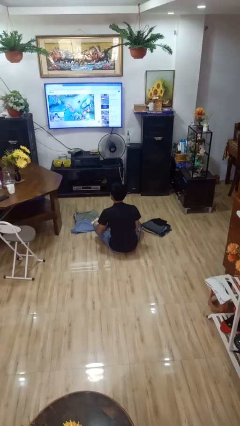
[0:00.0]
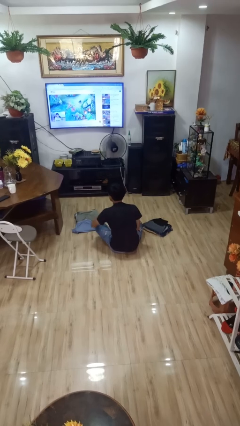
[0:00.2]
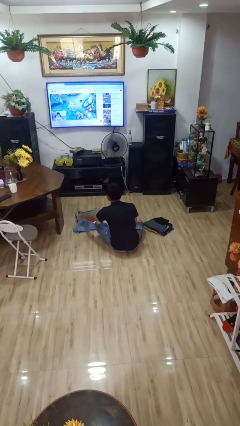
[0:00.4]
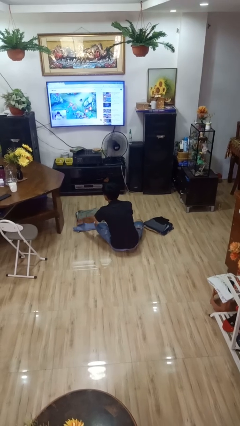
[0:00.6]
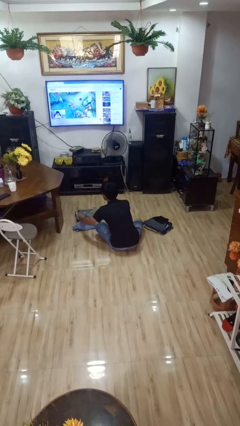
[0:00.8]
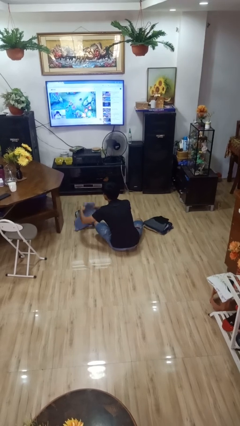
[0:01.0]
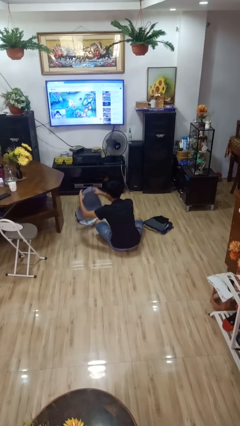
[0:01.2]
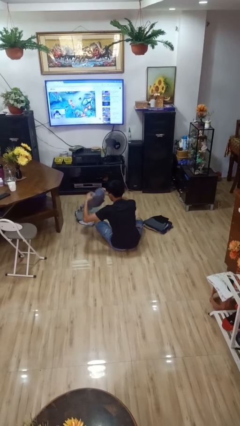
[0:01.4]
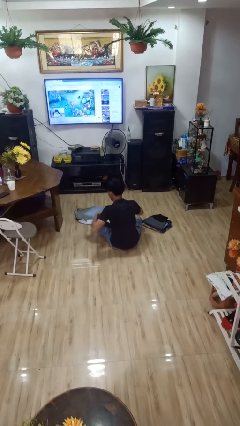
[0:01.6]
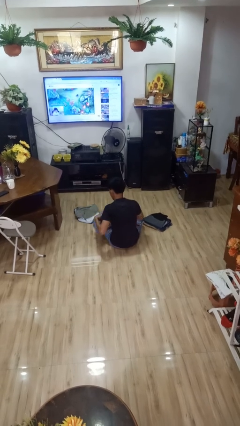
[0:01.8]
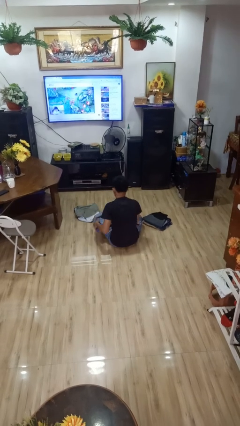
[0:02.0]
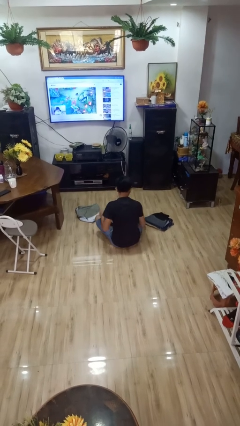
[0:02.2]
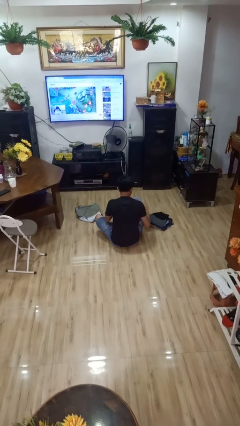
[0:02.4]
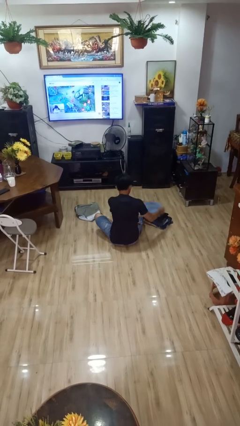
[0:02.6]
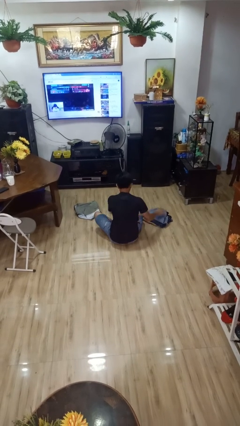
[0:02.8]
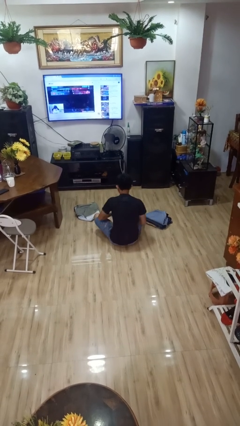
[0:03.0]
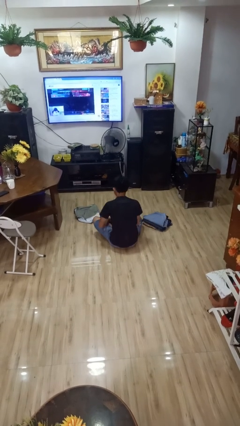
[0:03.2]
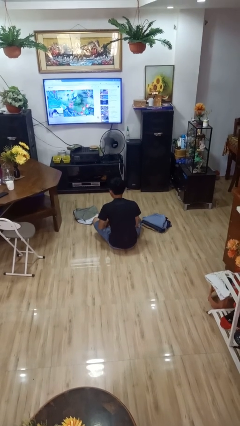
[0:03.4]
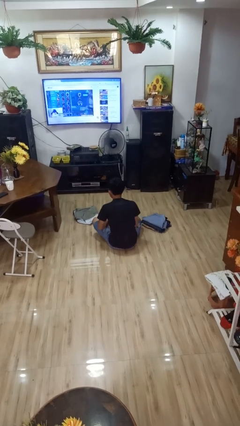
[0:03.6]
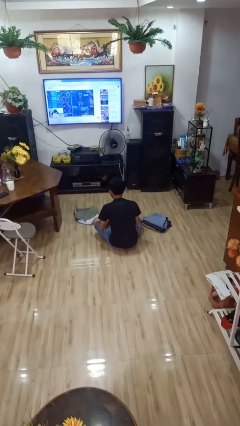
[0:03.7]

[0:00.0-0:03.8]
person folds pants

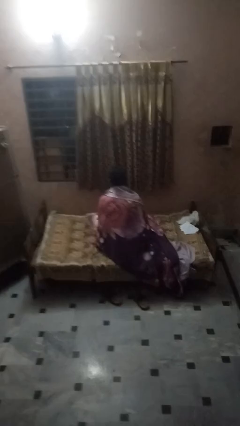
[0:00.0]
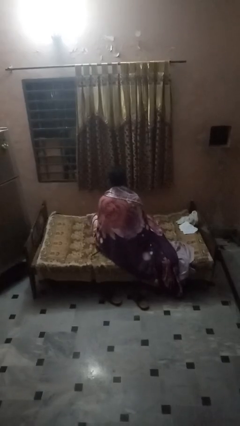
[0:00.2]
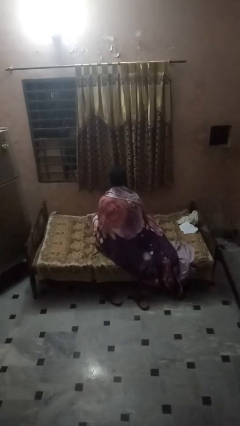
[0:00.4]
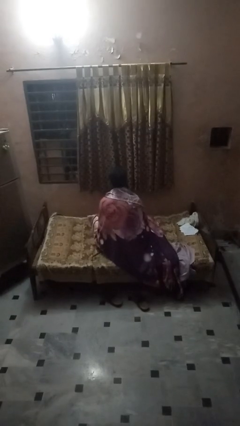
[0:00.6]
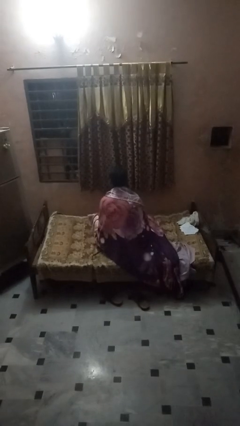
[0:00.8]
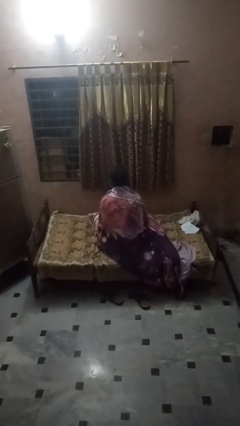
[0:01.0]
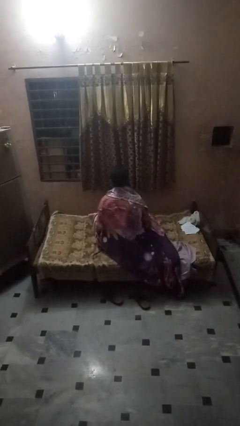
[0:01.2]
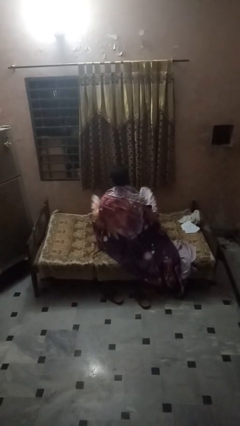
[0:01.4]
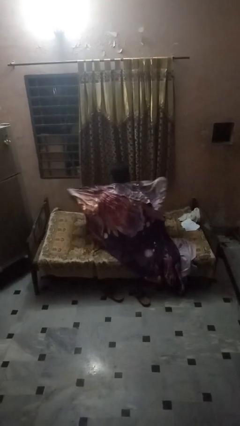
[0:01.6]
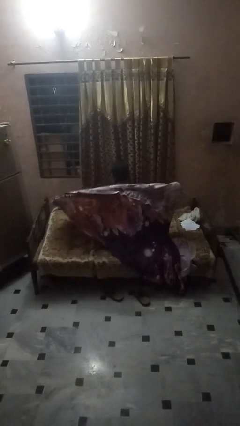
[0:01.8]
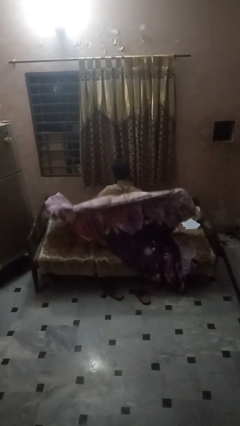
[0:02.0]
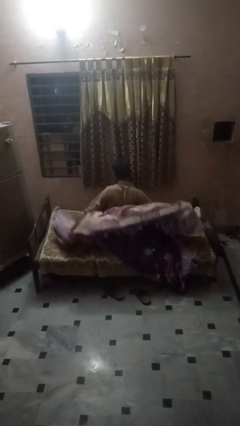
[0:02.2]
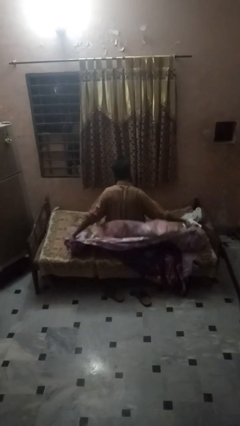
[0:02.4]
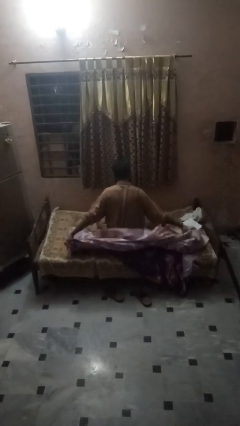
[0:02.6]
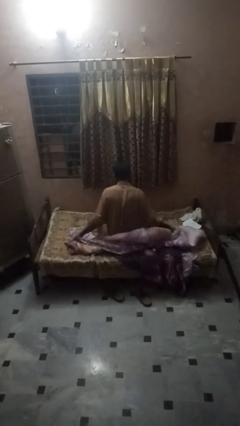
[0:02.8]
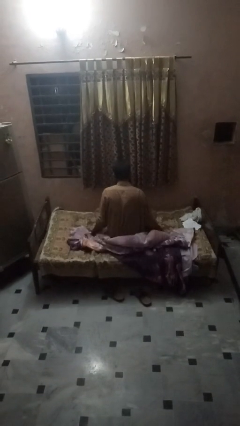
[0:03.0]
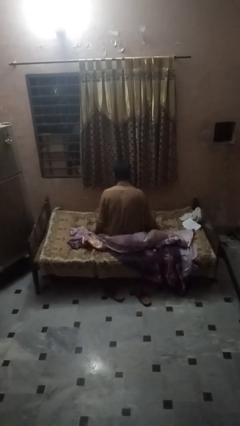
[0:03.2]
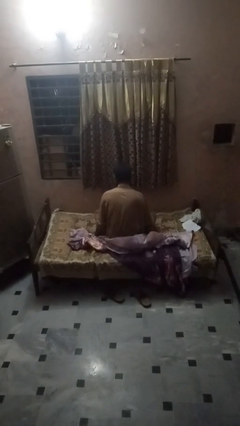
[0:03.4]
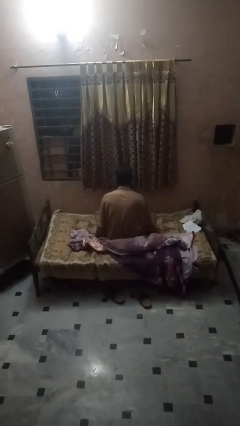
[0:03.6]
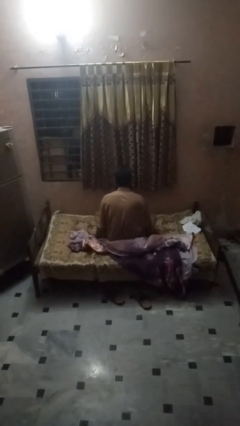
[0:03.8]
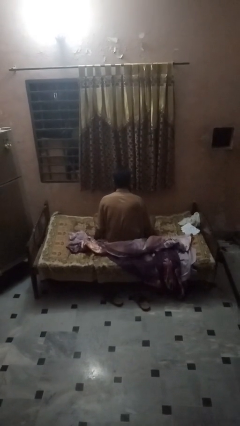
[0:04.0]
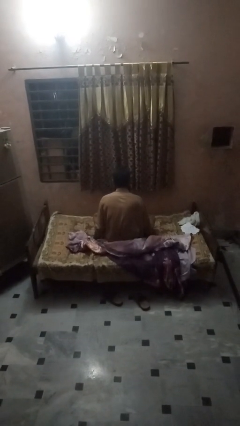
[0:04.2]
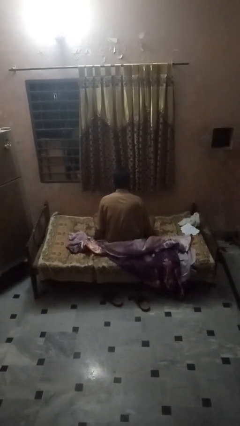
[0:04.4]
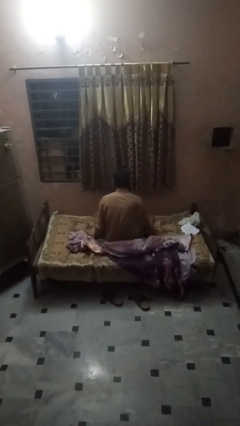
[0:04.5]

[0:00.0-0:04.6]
person uncovers with bedsheets

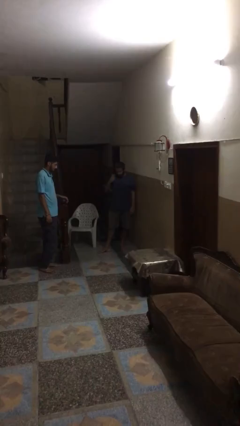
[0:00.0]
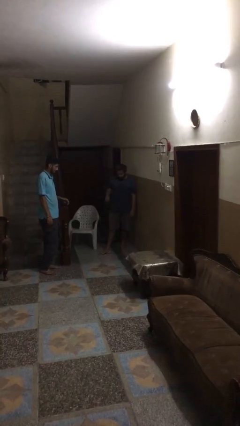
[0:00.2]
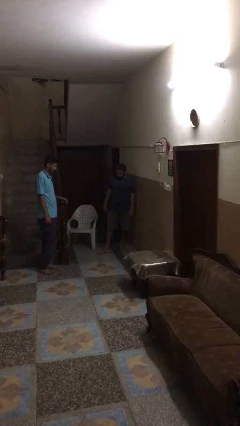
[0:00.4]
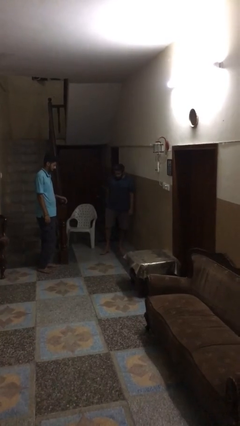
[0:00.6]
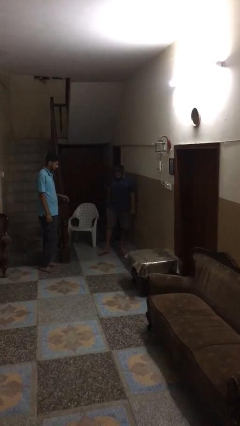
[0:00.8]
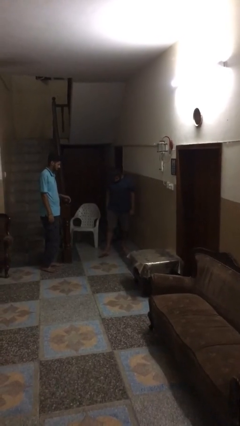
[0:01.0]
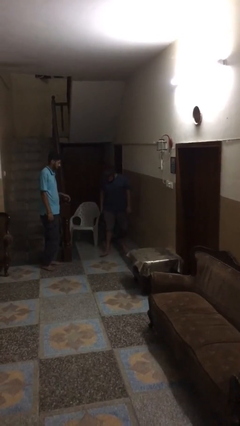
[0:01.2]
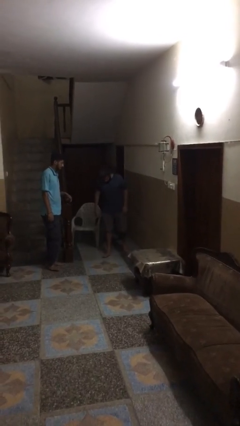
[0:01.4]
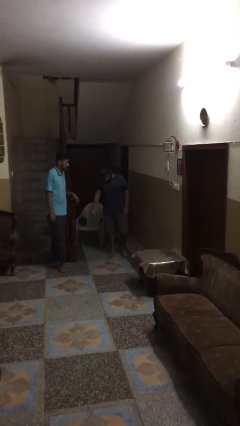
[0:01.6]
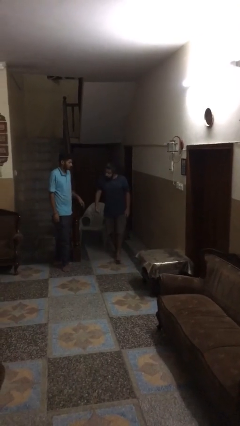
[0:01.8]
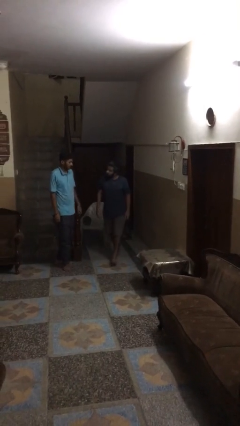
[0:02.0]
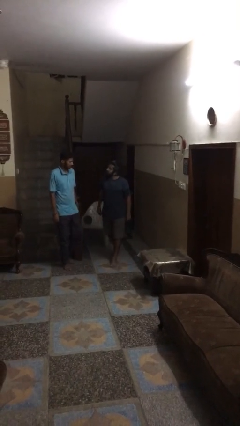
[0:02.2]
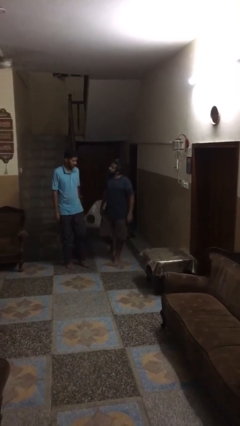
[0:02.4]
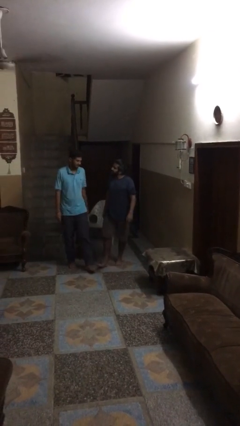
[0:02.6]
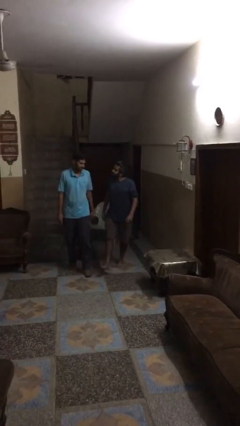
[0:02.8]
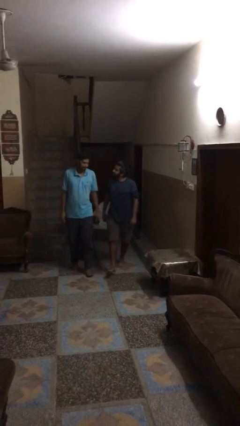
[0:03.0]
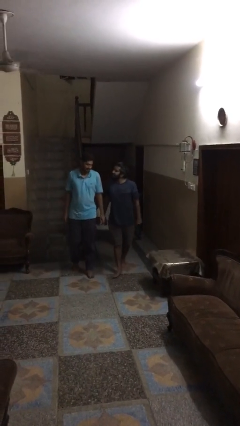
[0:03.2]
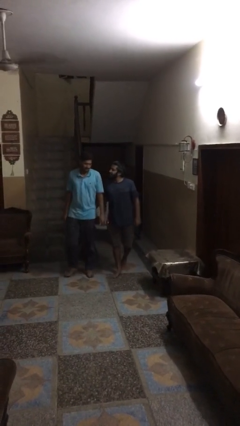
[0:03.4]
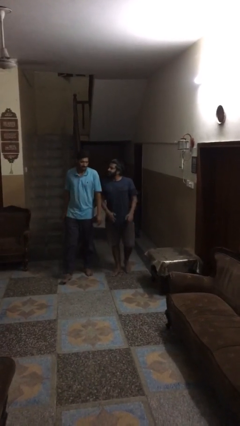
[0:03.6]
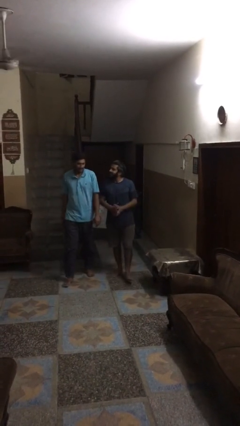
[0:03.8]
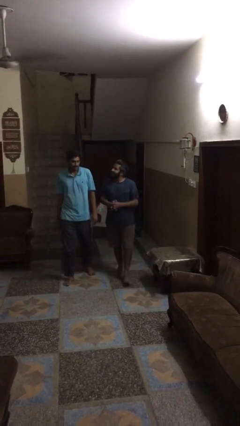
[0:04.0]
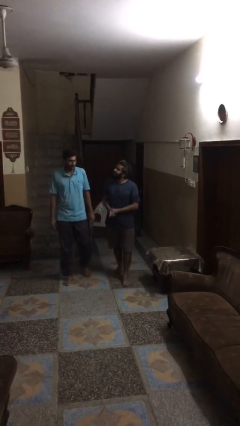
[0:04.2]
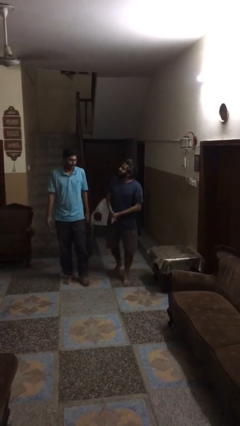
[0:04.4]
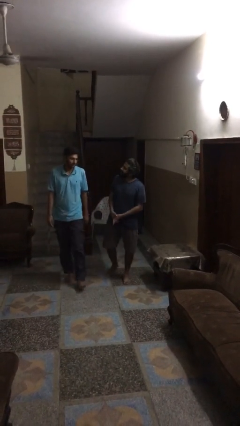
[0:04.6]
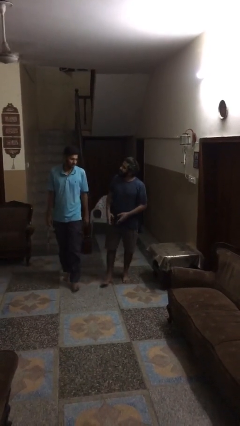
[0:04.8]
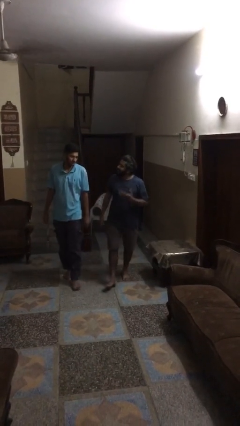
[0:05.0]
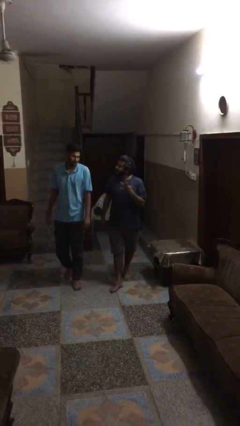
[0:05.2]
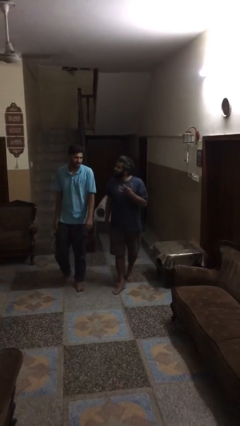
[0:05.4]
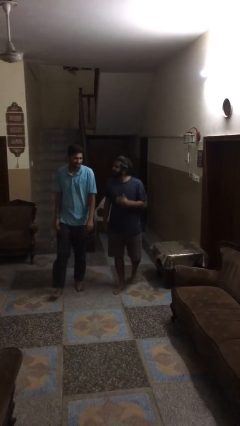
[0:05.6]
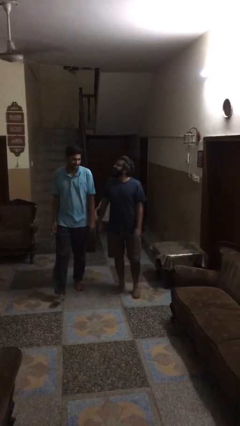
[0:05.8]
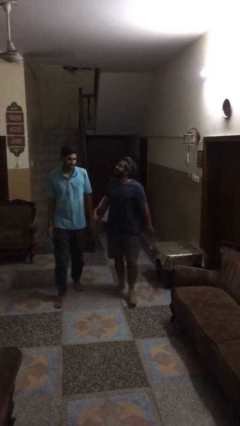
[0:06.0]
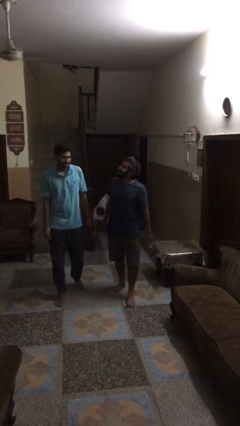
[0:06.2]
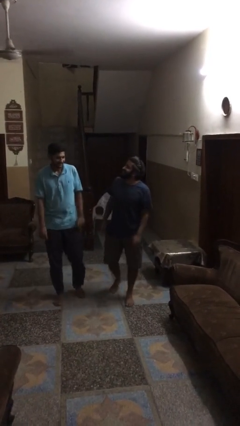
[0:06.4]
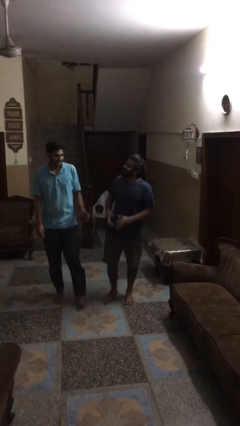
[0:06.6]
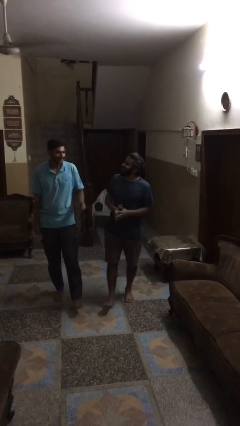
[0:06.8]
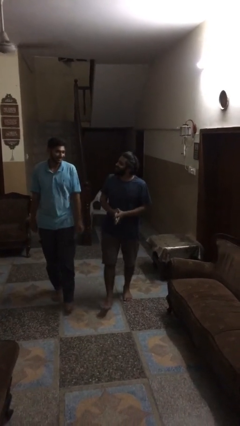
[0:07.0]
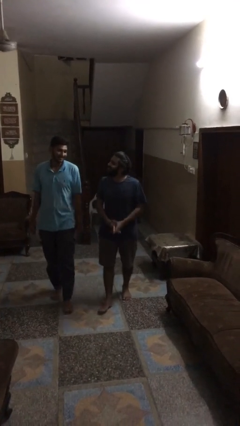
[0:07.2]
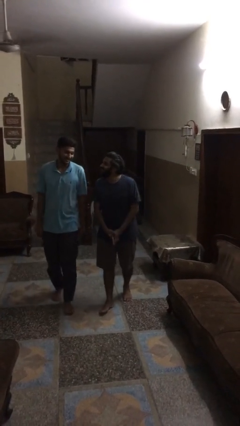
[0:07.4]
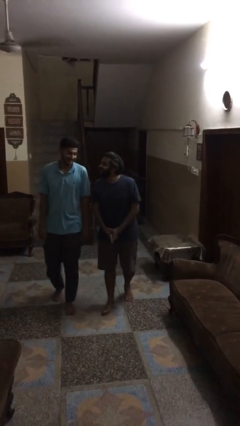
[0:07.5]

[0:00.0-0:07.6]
person talks to person

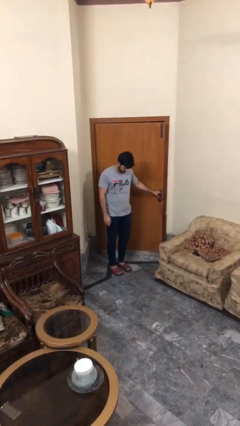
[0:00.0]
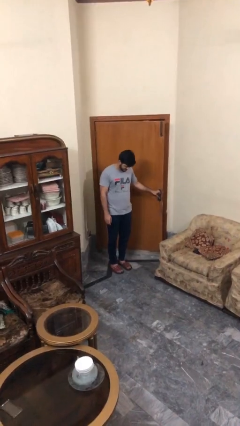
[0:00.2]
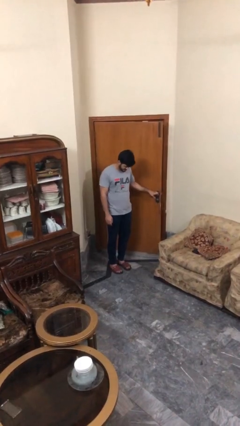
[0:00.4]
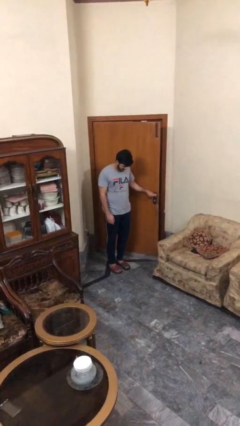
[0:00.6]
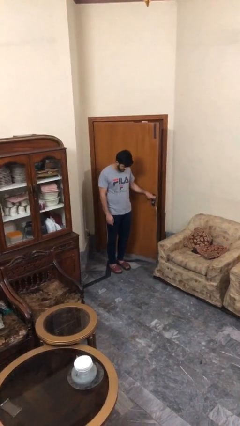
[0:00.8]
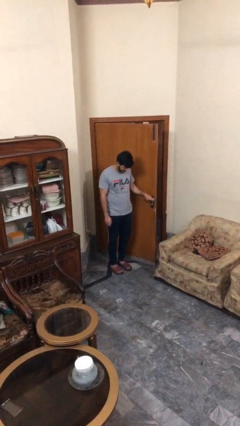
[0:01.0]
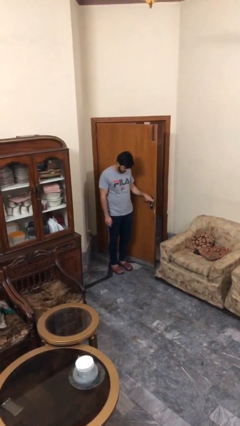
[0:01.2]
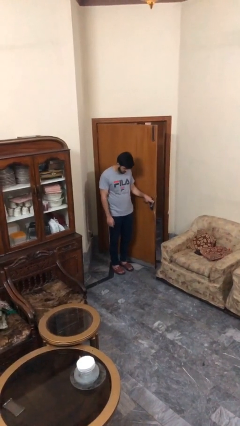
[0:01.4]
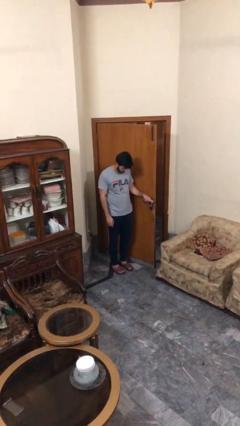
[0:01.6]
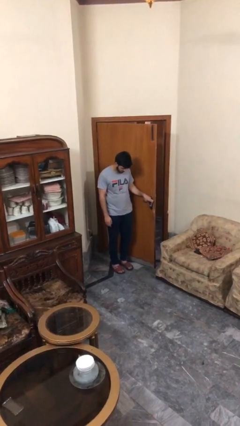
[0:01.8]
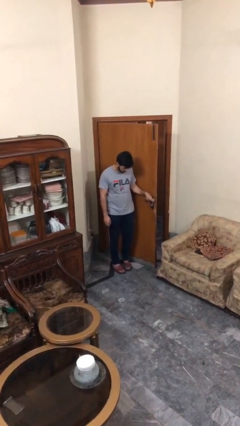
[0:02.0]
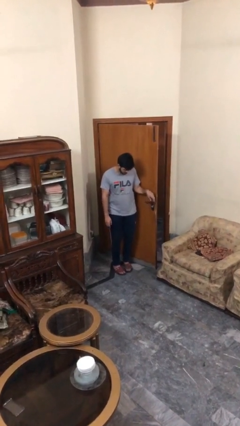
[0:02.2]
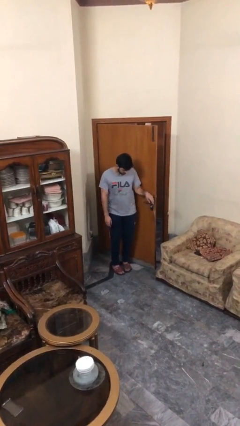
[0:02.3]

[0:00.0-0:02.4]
person opens facility door
